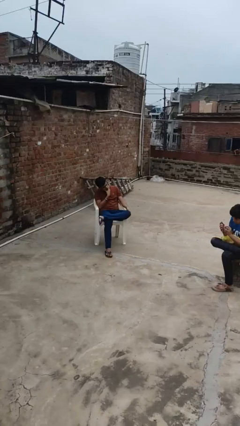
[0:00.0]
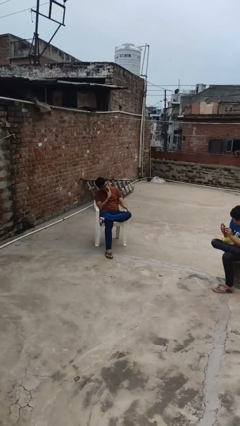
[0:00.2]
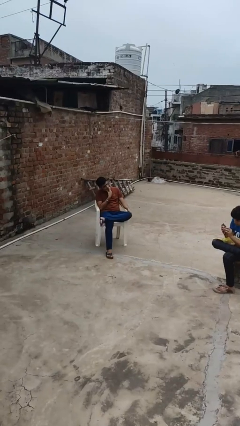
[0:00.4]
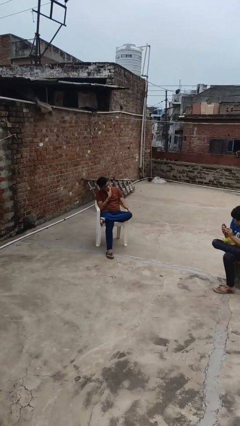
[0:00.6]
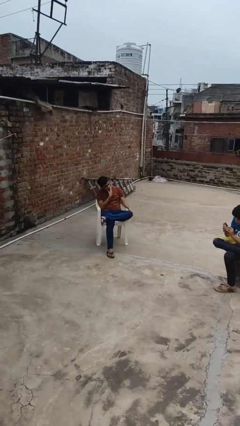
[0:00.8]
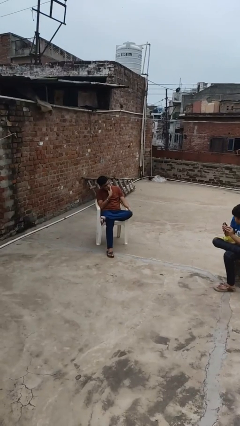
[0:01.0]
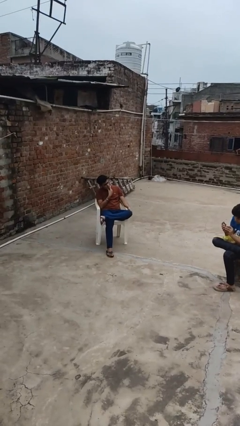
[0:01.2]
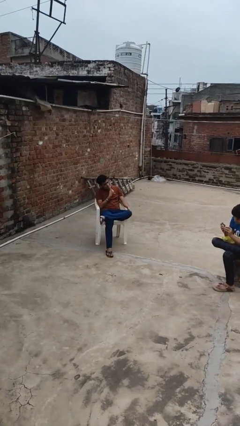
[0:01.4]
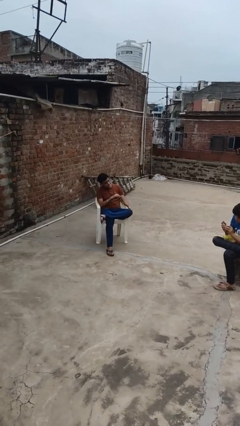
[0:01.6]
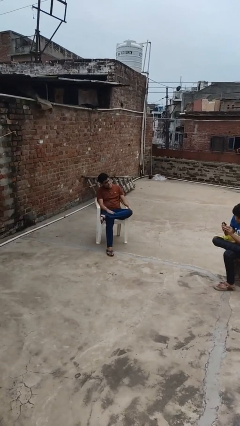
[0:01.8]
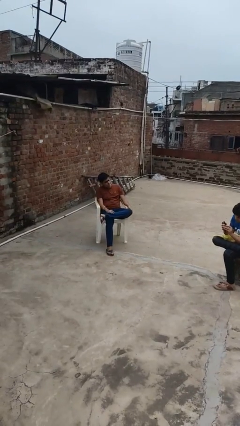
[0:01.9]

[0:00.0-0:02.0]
person strokes chin

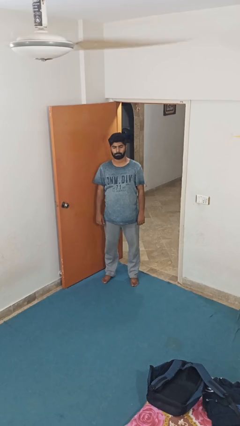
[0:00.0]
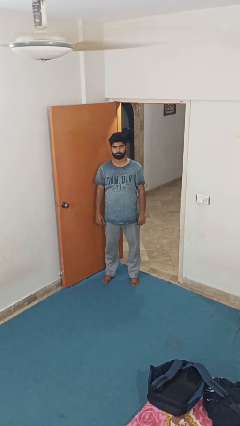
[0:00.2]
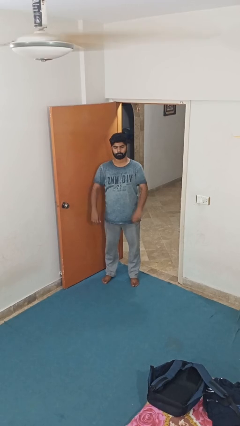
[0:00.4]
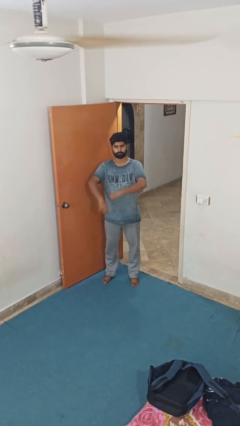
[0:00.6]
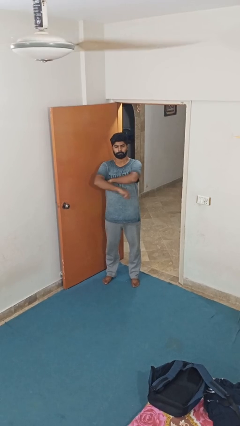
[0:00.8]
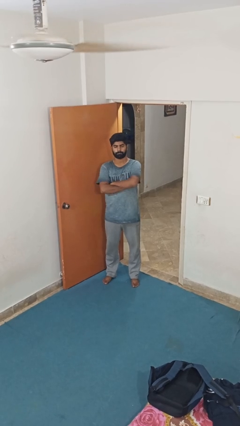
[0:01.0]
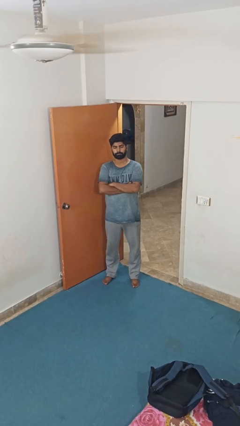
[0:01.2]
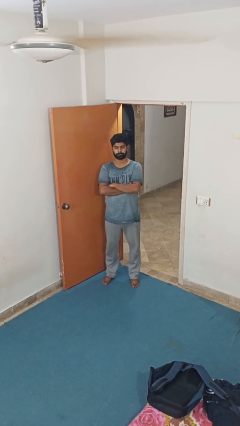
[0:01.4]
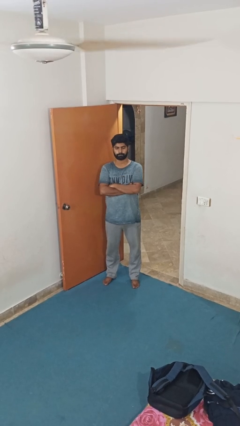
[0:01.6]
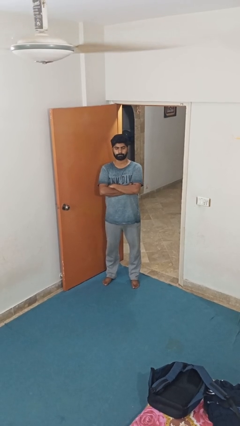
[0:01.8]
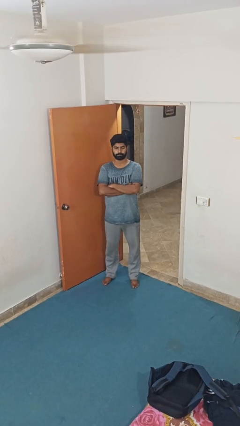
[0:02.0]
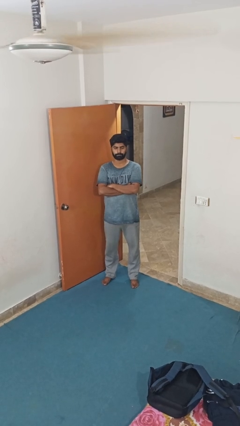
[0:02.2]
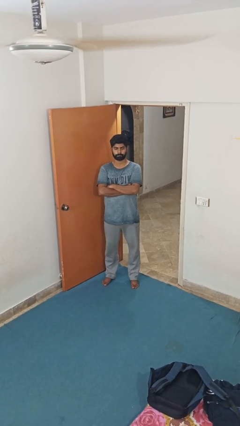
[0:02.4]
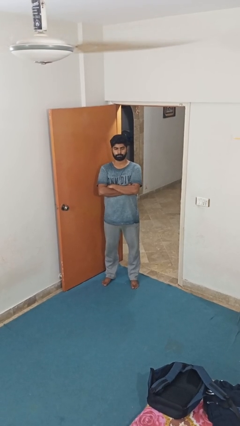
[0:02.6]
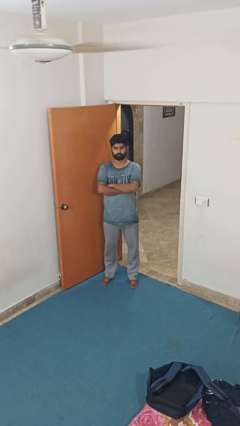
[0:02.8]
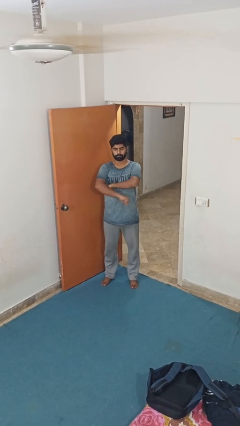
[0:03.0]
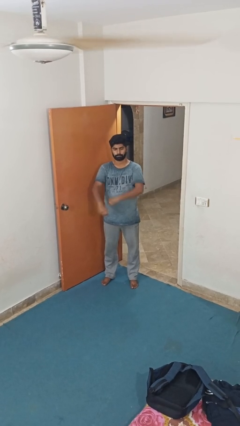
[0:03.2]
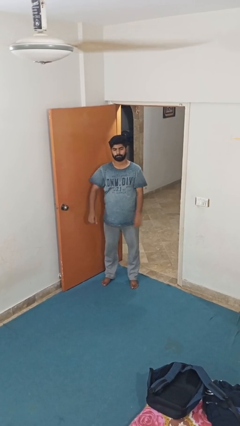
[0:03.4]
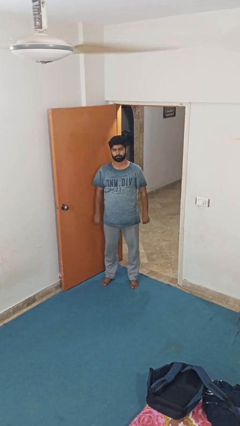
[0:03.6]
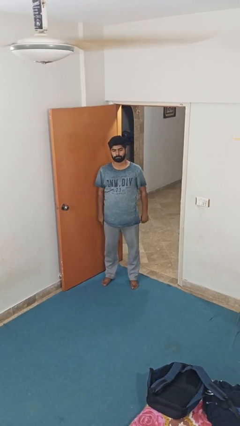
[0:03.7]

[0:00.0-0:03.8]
person crosses arms

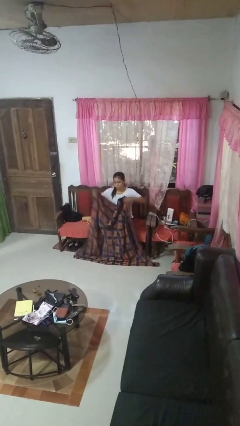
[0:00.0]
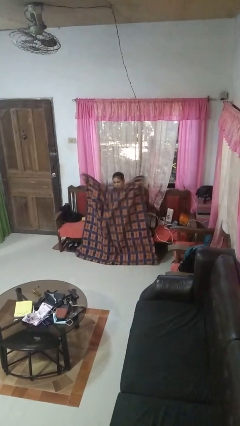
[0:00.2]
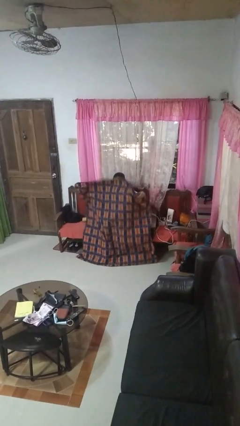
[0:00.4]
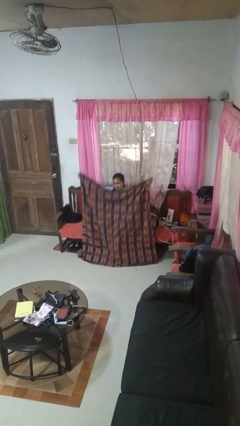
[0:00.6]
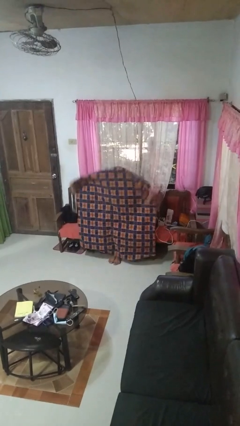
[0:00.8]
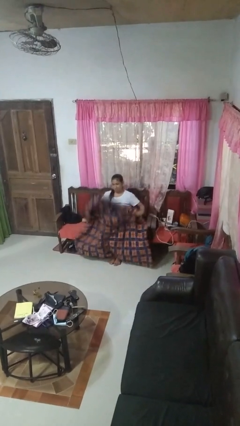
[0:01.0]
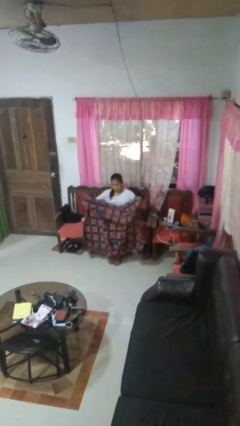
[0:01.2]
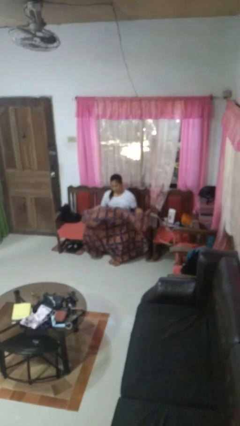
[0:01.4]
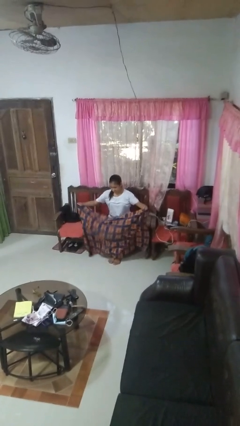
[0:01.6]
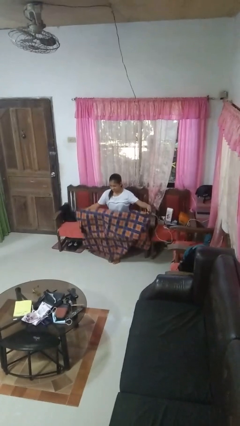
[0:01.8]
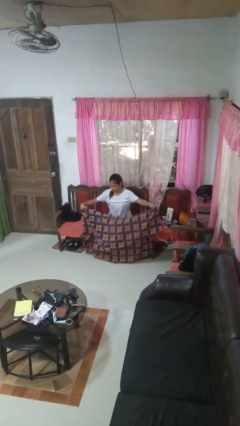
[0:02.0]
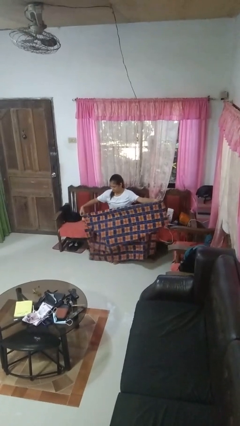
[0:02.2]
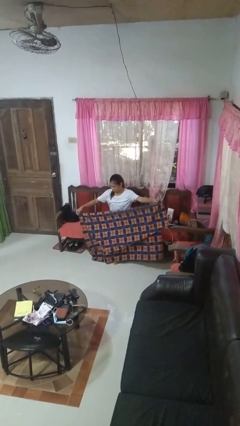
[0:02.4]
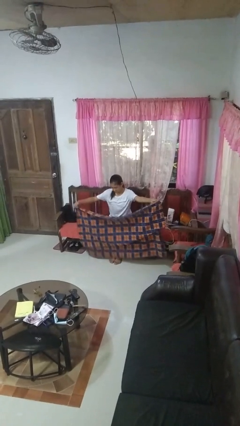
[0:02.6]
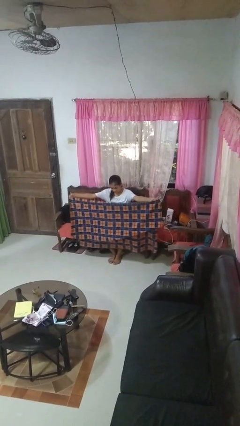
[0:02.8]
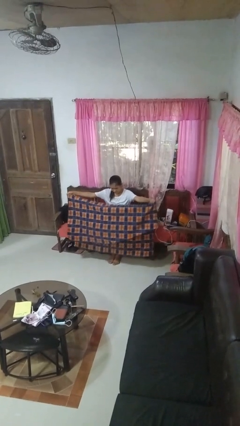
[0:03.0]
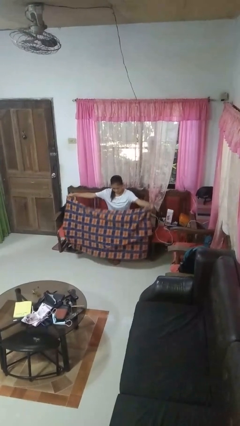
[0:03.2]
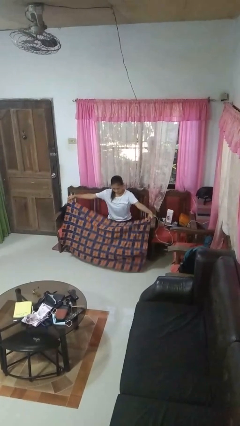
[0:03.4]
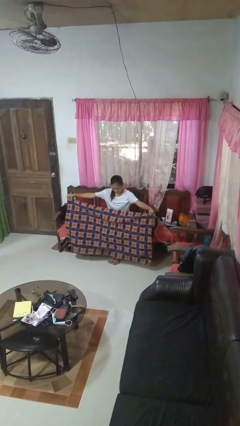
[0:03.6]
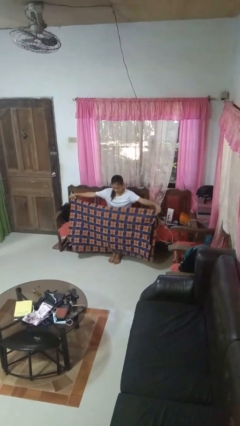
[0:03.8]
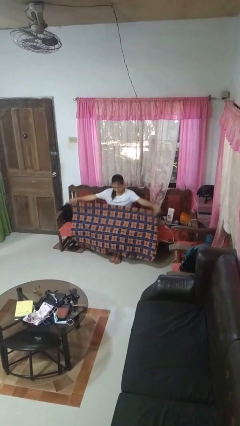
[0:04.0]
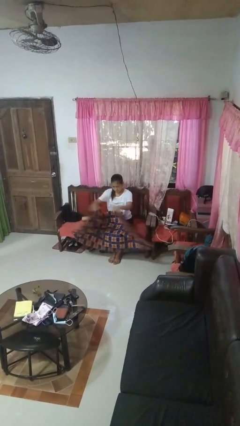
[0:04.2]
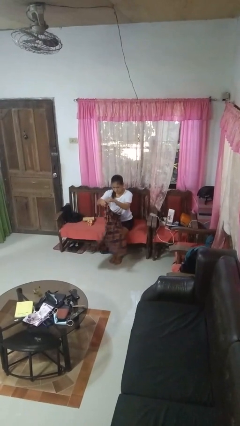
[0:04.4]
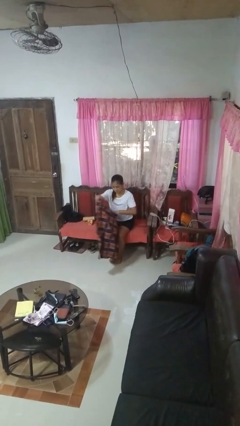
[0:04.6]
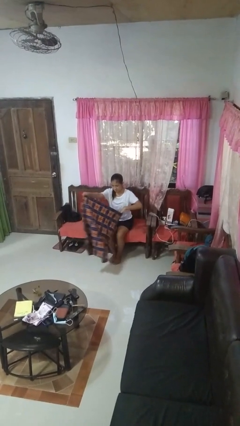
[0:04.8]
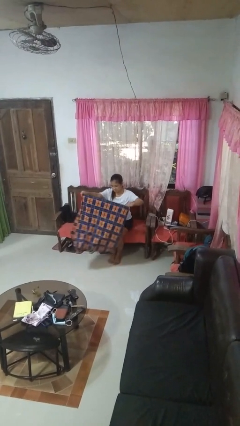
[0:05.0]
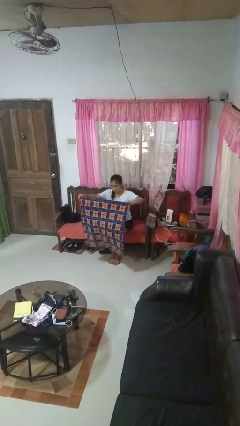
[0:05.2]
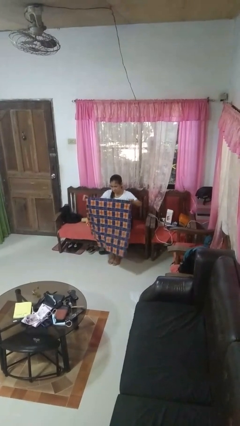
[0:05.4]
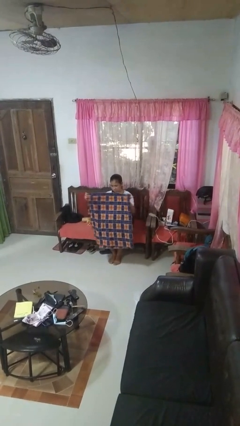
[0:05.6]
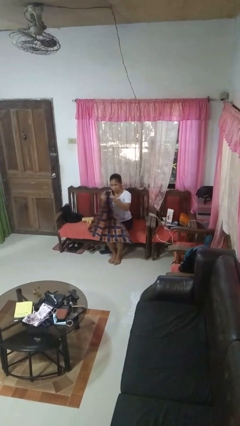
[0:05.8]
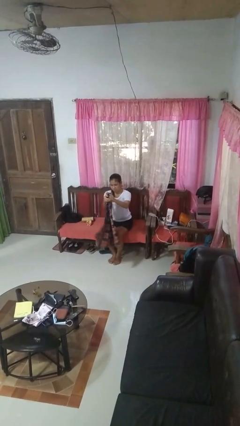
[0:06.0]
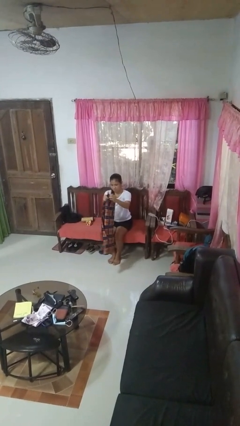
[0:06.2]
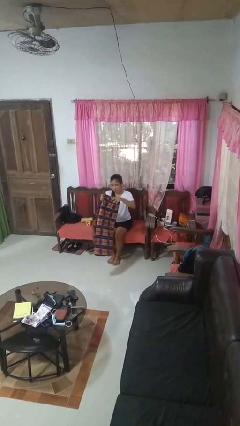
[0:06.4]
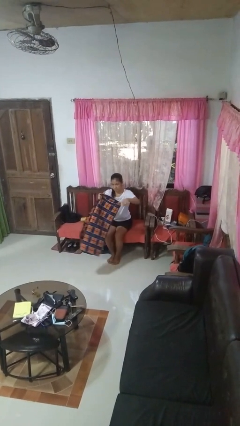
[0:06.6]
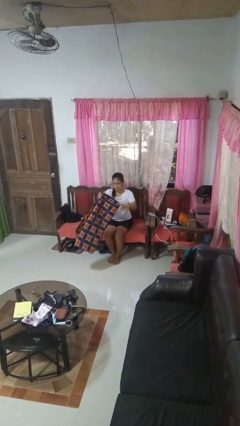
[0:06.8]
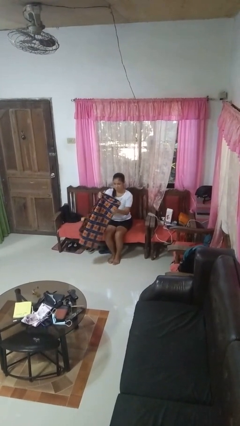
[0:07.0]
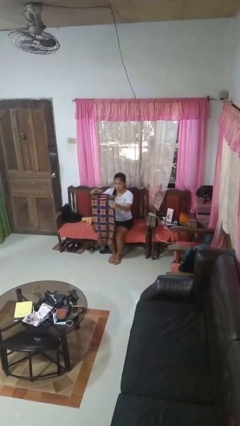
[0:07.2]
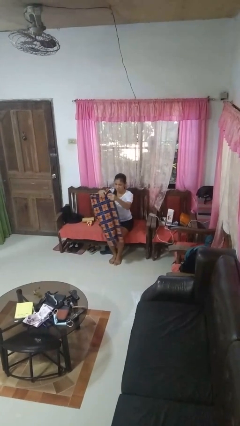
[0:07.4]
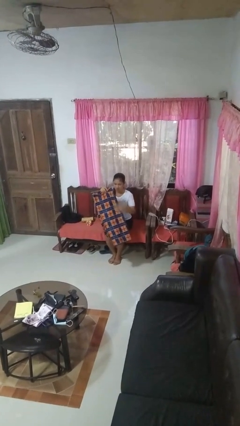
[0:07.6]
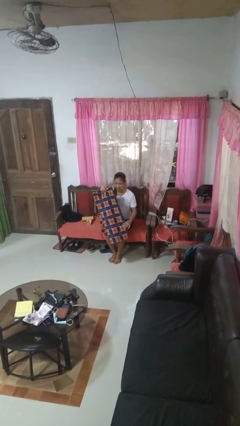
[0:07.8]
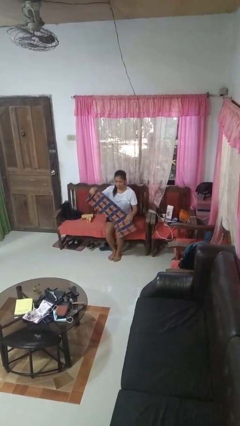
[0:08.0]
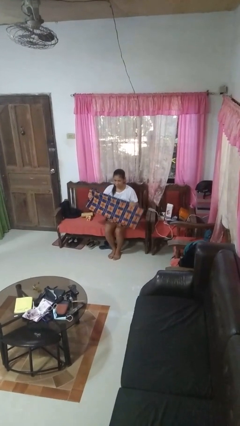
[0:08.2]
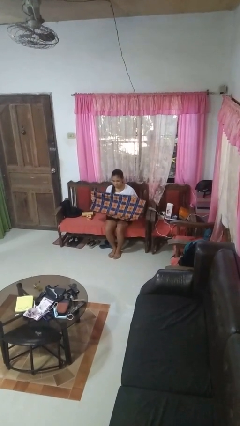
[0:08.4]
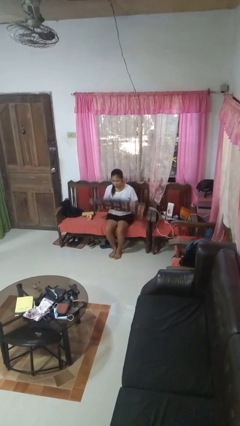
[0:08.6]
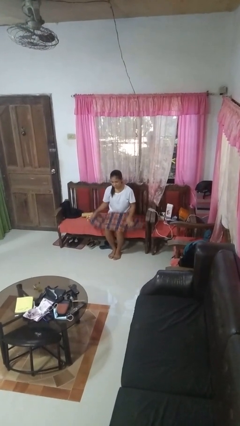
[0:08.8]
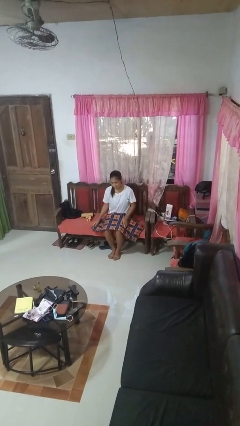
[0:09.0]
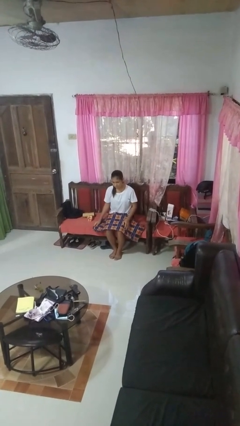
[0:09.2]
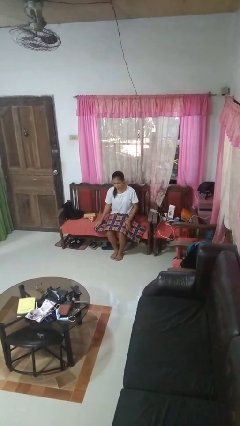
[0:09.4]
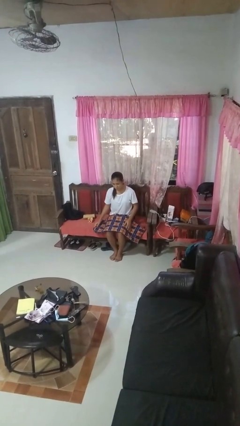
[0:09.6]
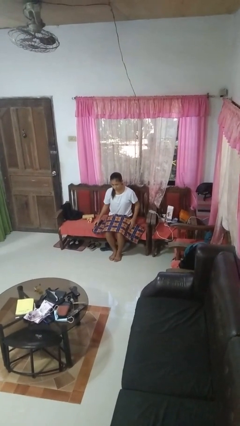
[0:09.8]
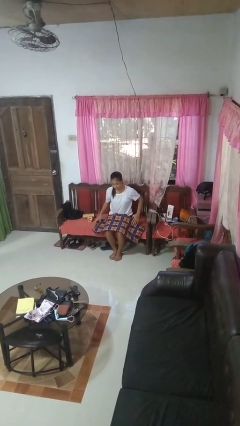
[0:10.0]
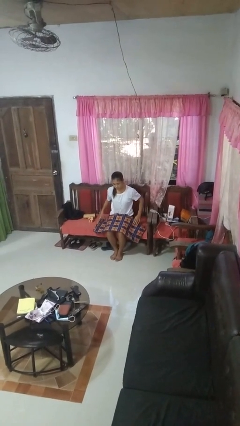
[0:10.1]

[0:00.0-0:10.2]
person folds blanket

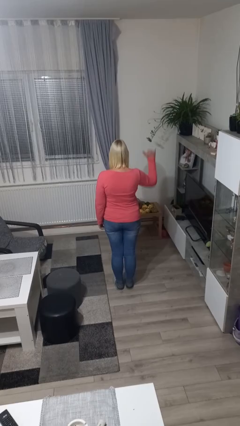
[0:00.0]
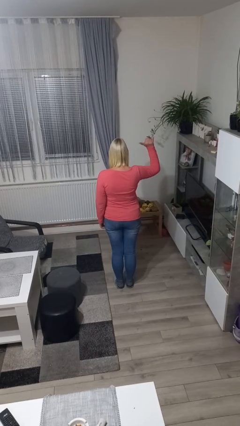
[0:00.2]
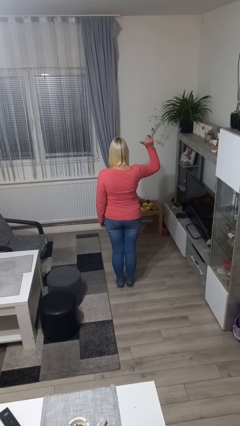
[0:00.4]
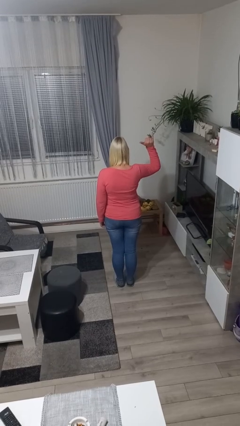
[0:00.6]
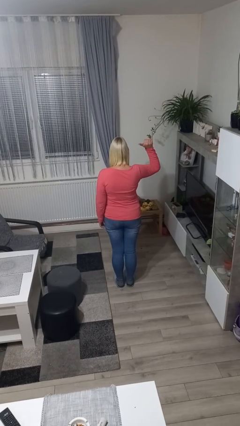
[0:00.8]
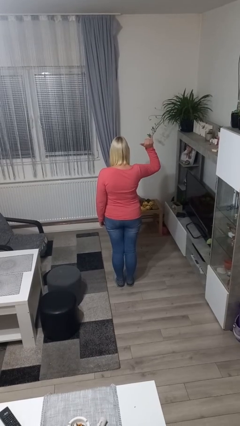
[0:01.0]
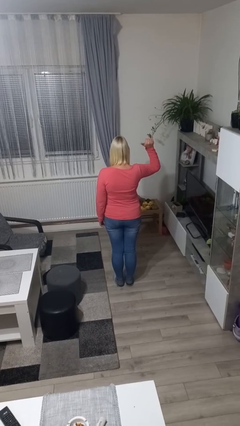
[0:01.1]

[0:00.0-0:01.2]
person gestures hang loose

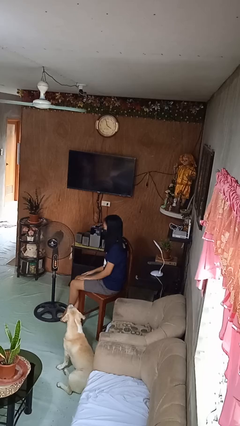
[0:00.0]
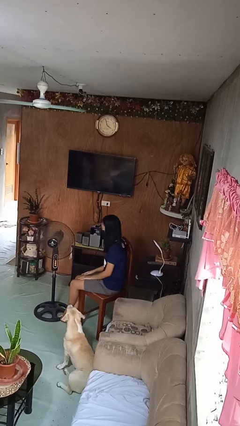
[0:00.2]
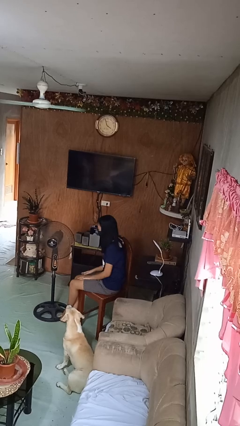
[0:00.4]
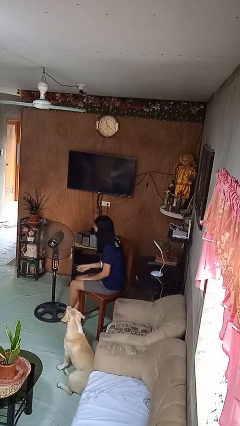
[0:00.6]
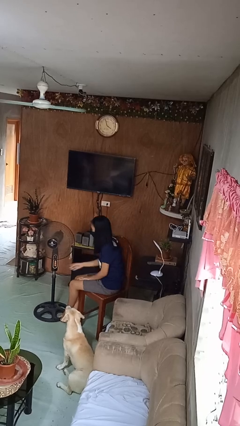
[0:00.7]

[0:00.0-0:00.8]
person turns off fan
